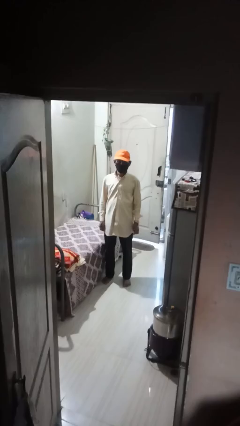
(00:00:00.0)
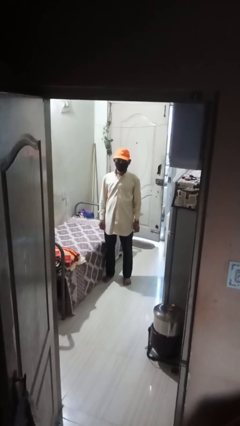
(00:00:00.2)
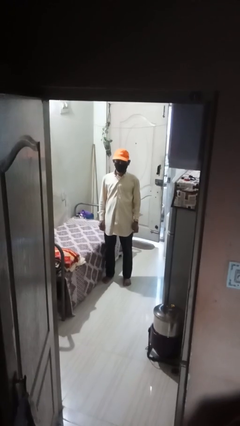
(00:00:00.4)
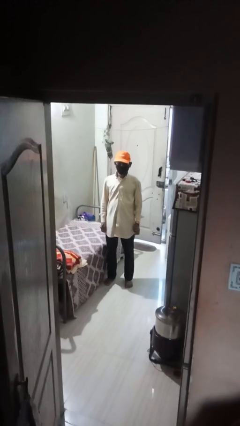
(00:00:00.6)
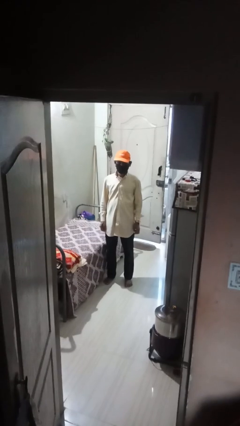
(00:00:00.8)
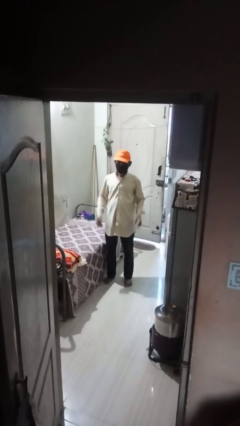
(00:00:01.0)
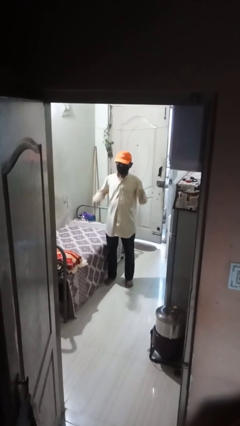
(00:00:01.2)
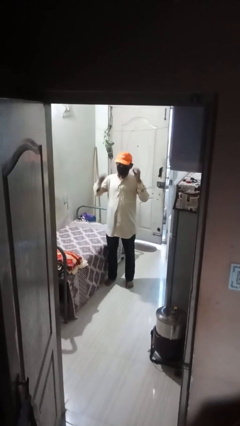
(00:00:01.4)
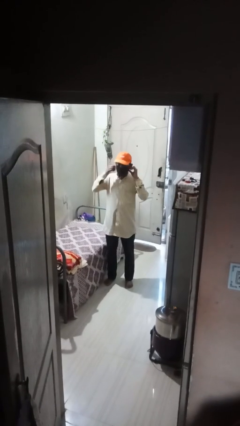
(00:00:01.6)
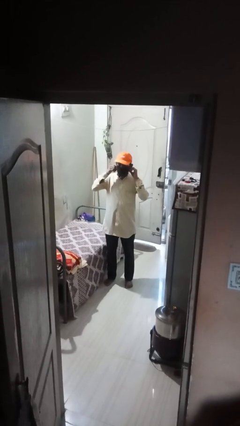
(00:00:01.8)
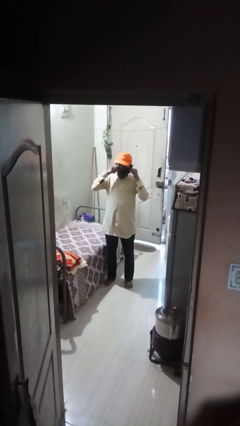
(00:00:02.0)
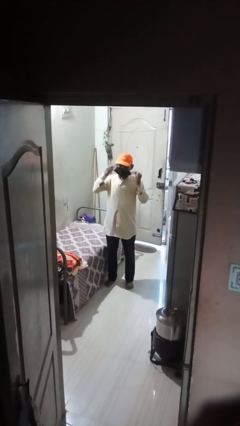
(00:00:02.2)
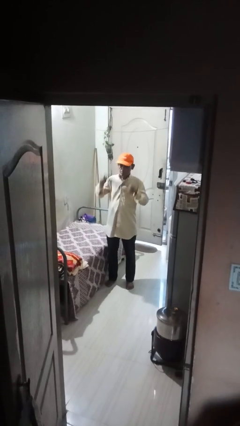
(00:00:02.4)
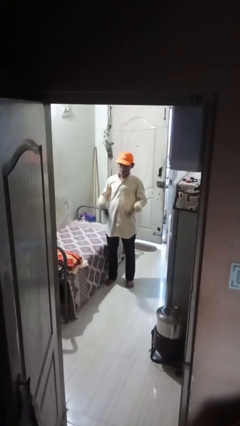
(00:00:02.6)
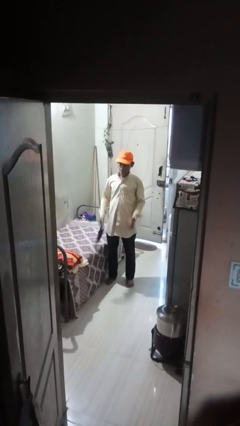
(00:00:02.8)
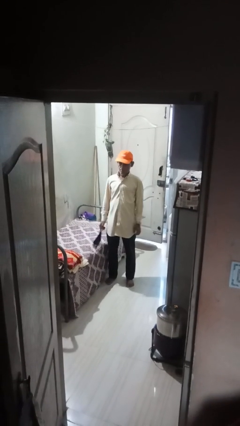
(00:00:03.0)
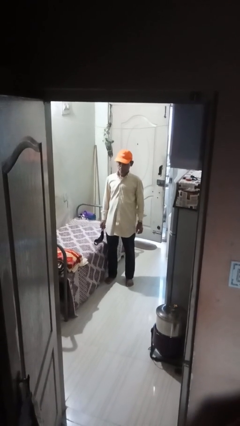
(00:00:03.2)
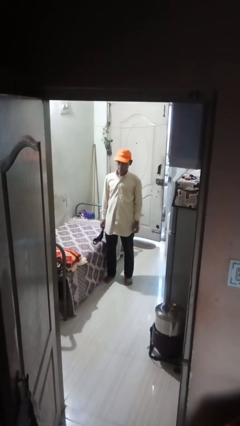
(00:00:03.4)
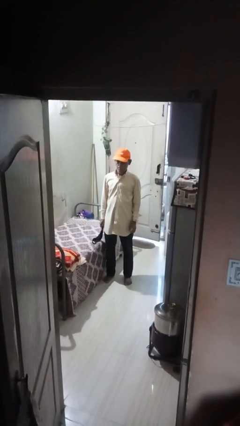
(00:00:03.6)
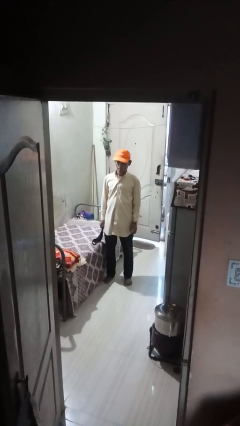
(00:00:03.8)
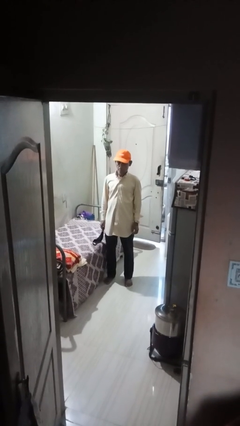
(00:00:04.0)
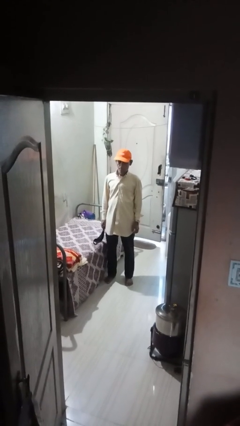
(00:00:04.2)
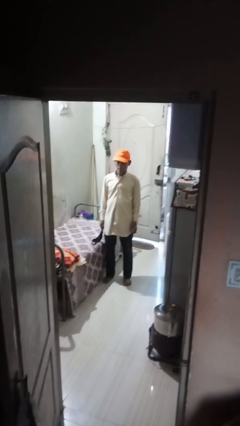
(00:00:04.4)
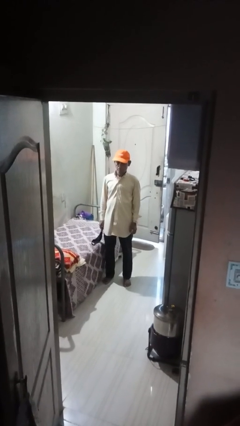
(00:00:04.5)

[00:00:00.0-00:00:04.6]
person takes off facemask

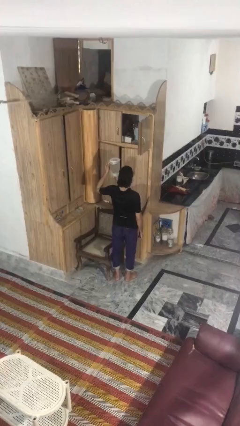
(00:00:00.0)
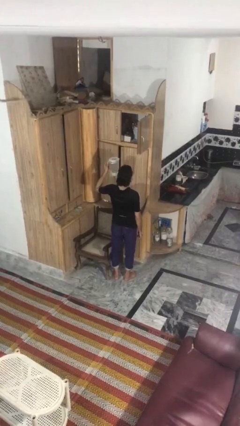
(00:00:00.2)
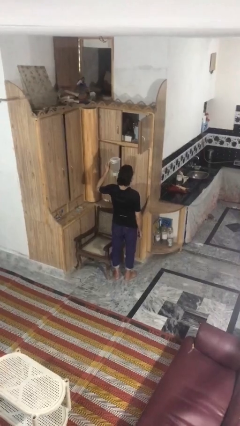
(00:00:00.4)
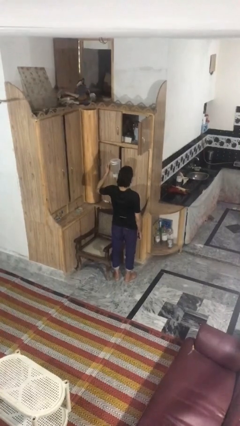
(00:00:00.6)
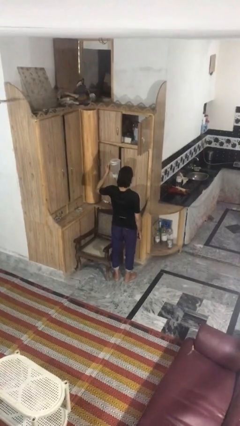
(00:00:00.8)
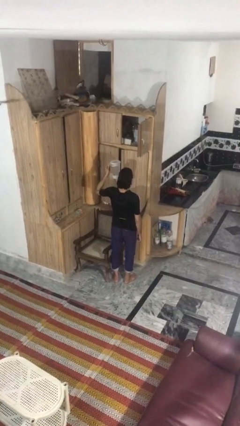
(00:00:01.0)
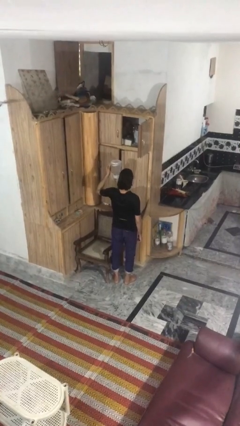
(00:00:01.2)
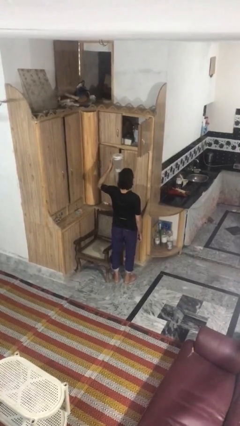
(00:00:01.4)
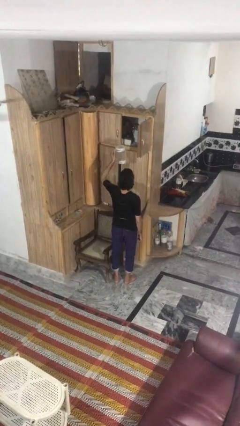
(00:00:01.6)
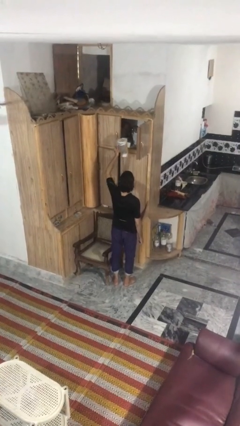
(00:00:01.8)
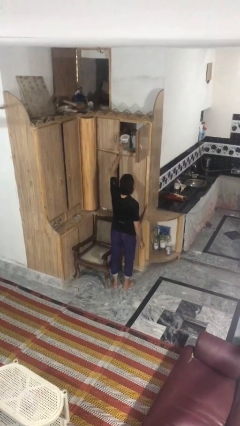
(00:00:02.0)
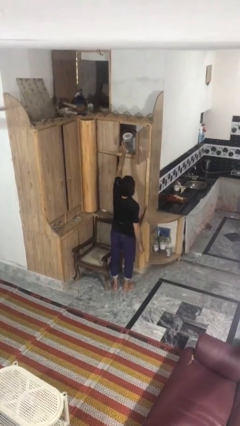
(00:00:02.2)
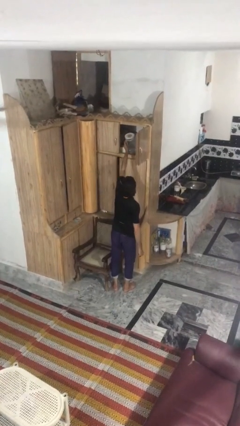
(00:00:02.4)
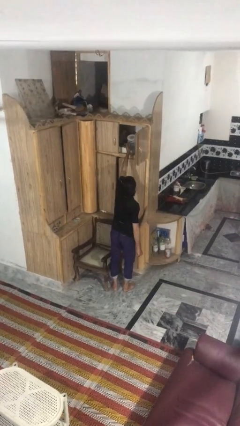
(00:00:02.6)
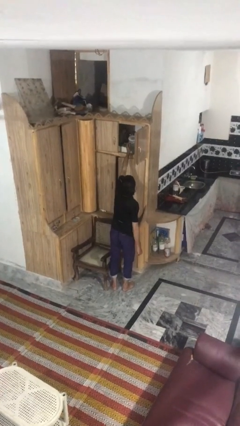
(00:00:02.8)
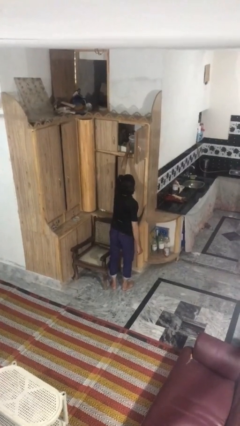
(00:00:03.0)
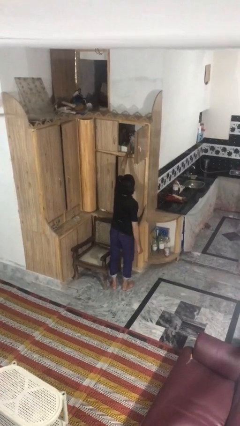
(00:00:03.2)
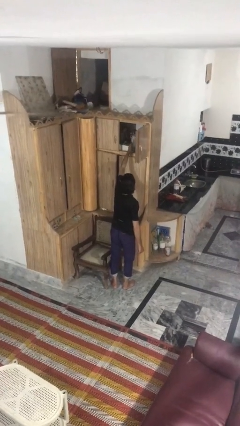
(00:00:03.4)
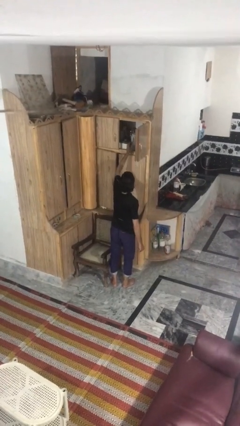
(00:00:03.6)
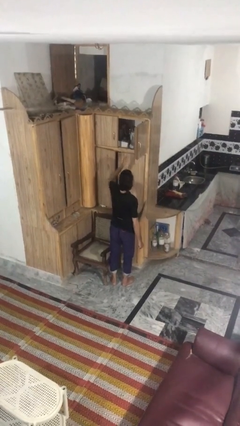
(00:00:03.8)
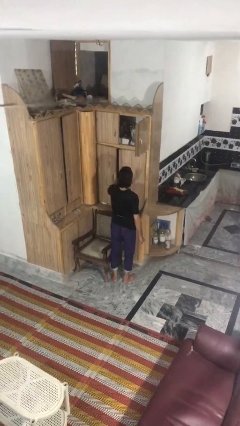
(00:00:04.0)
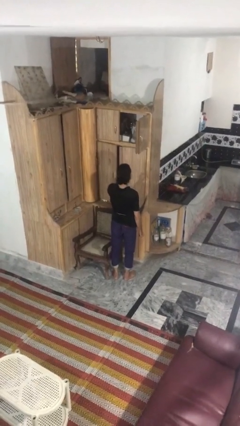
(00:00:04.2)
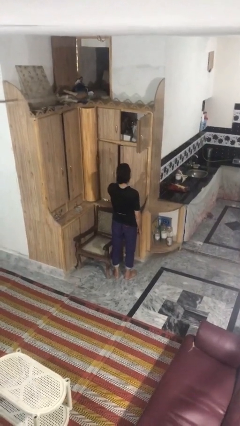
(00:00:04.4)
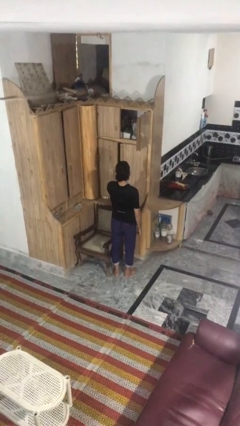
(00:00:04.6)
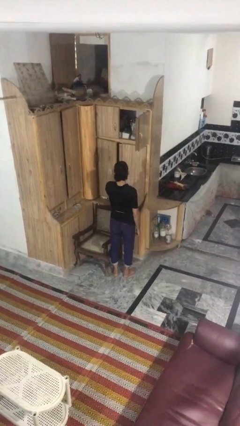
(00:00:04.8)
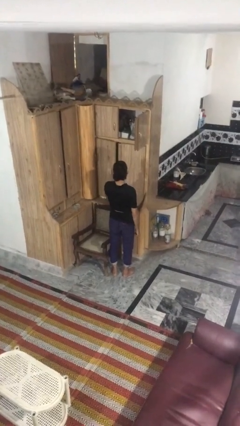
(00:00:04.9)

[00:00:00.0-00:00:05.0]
person puts down object on shelf

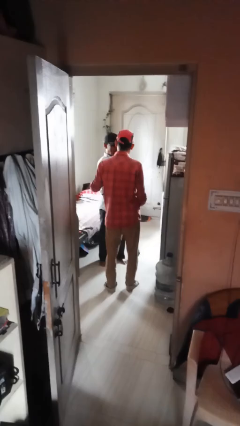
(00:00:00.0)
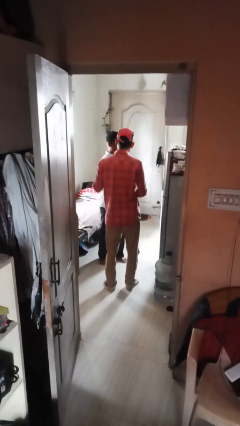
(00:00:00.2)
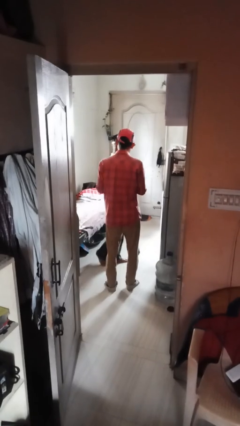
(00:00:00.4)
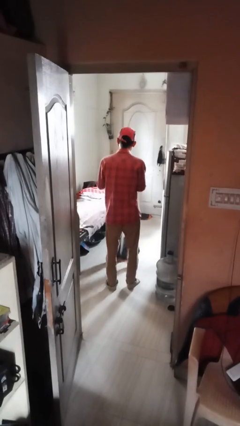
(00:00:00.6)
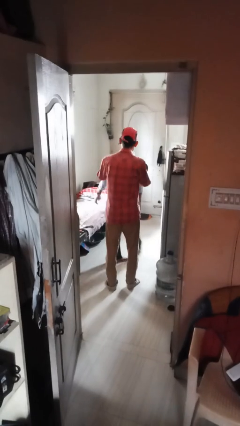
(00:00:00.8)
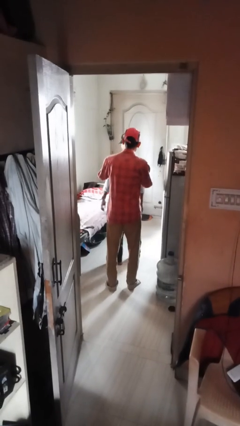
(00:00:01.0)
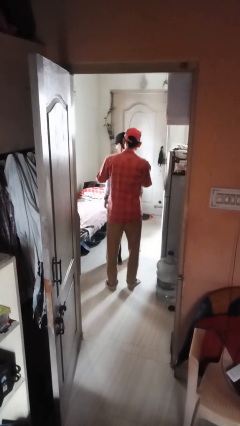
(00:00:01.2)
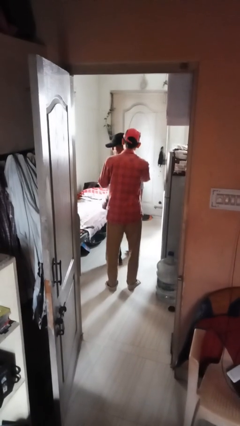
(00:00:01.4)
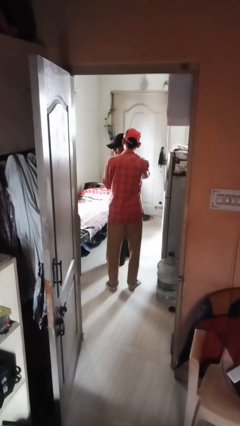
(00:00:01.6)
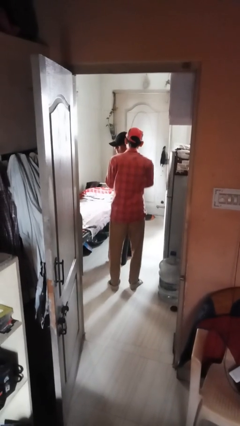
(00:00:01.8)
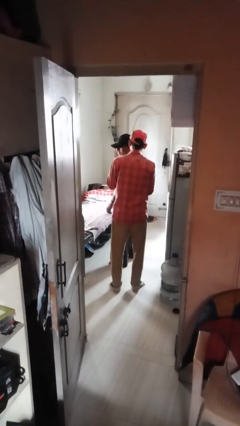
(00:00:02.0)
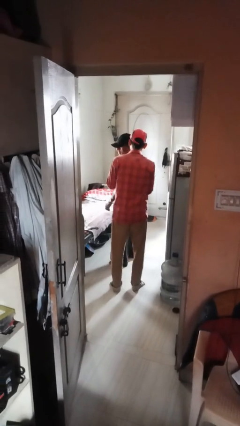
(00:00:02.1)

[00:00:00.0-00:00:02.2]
person spins person around

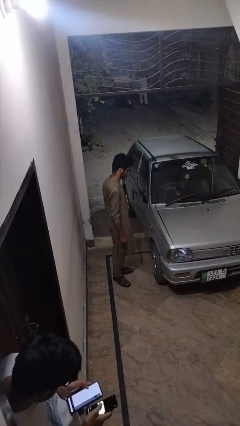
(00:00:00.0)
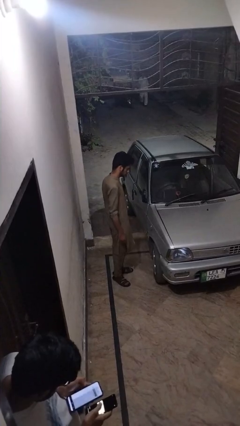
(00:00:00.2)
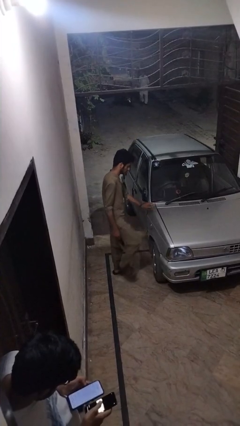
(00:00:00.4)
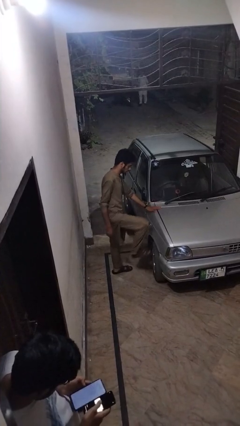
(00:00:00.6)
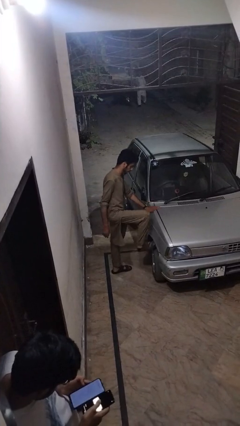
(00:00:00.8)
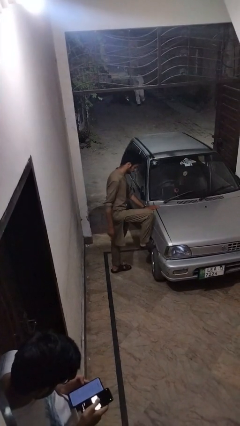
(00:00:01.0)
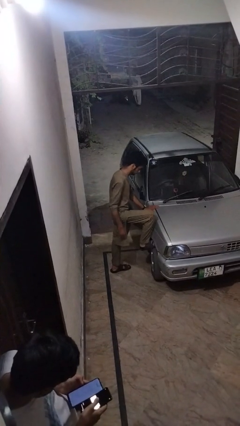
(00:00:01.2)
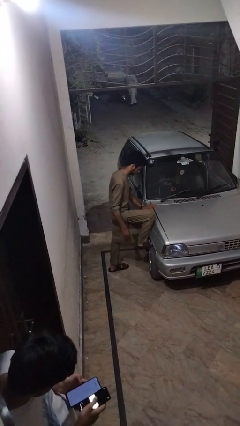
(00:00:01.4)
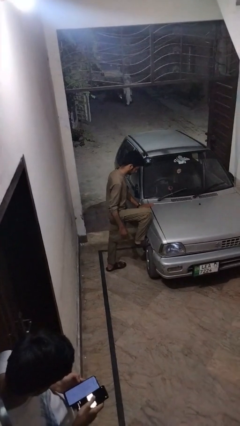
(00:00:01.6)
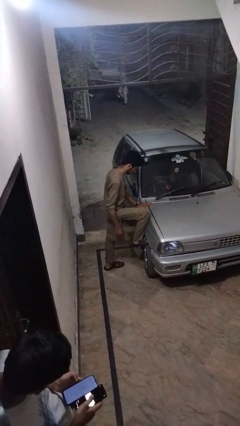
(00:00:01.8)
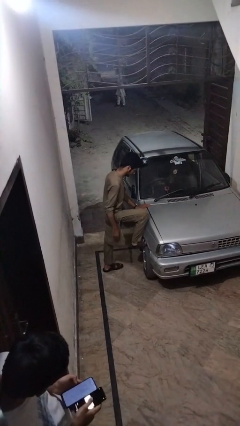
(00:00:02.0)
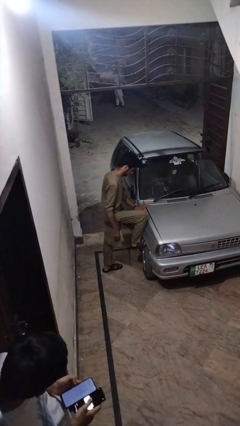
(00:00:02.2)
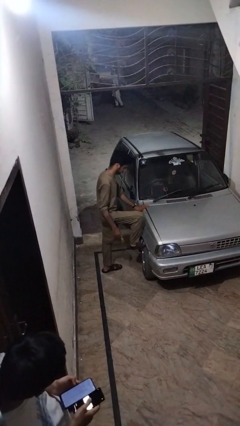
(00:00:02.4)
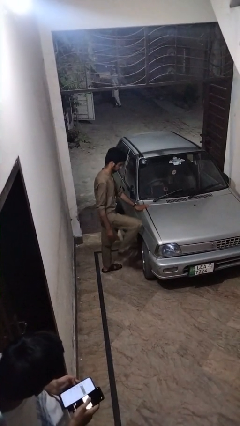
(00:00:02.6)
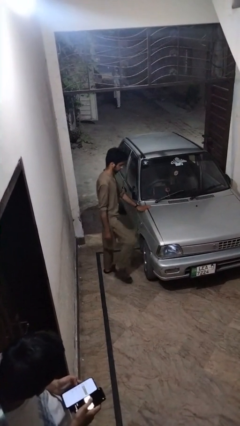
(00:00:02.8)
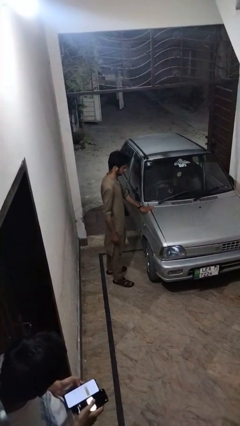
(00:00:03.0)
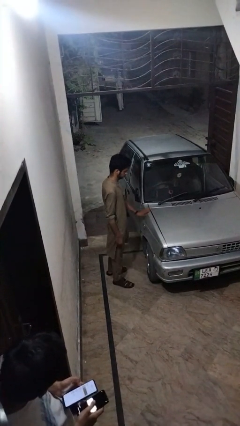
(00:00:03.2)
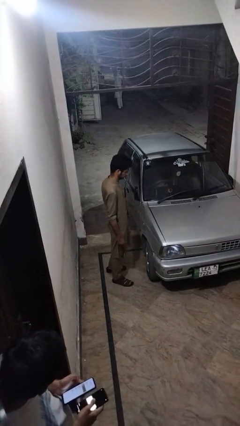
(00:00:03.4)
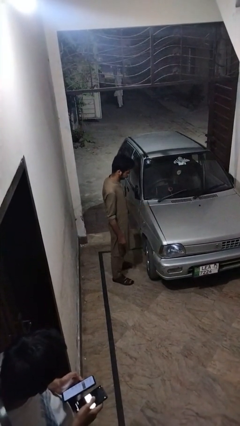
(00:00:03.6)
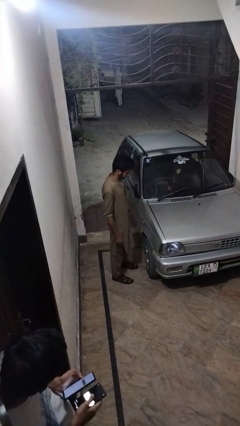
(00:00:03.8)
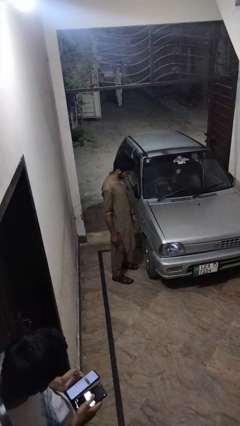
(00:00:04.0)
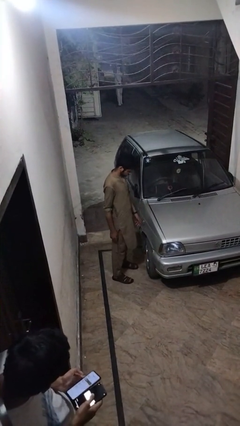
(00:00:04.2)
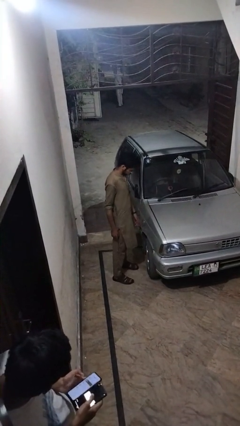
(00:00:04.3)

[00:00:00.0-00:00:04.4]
person kicks car tires

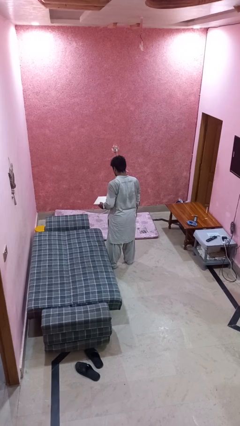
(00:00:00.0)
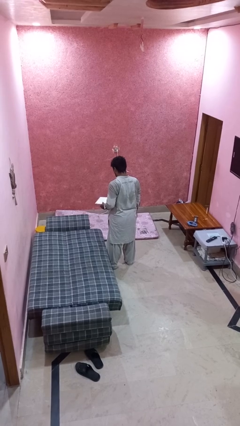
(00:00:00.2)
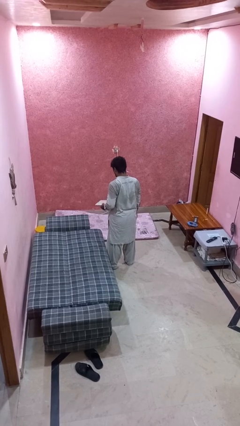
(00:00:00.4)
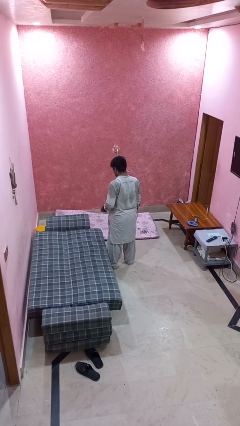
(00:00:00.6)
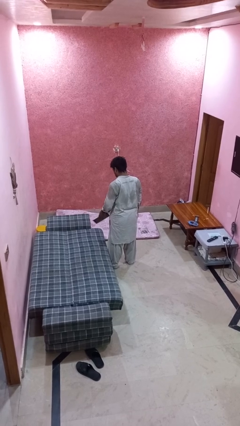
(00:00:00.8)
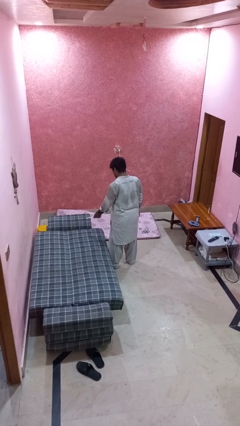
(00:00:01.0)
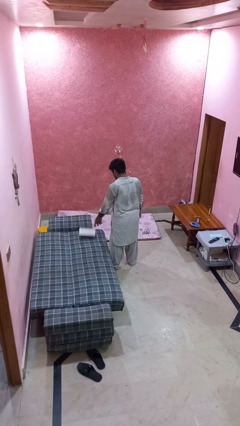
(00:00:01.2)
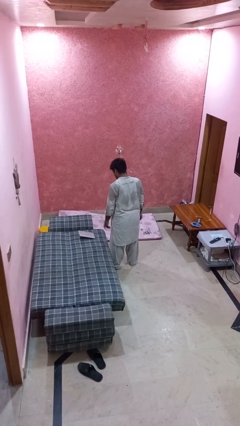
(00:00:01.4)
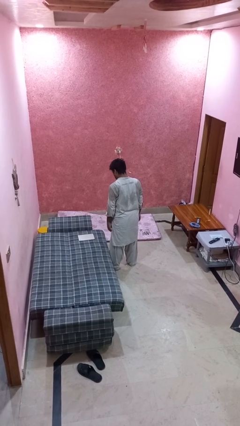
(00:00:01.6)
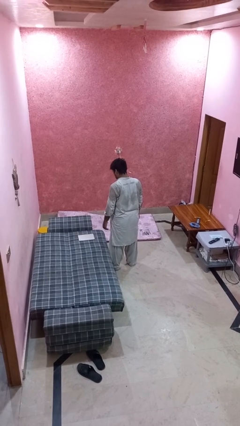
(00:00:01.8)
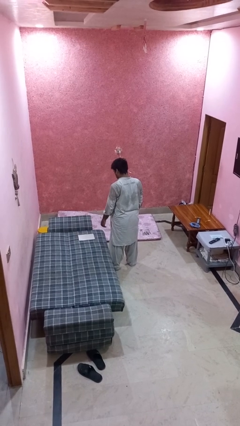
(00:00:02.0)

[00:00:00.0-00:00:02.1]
person throws object on bed
